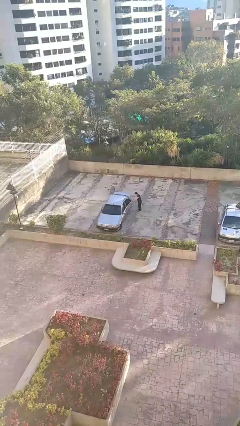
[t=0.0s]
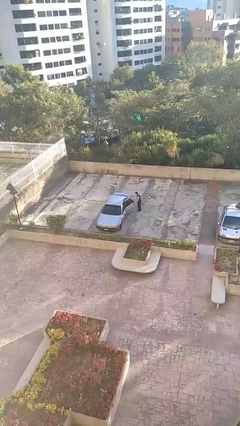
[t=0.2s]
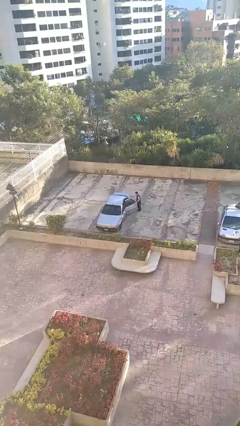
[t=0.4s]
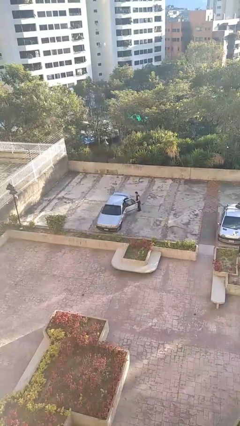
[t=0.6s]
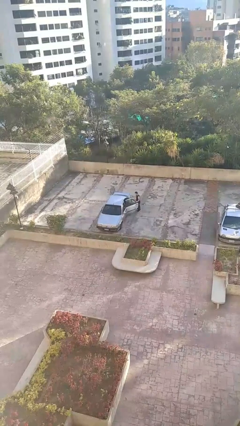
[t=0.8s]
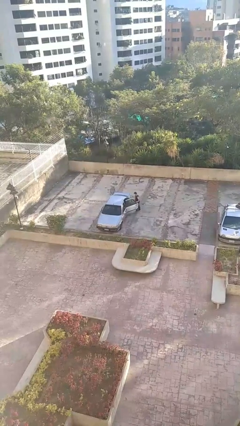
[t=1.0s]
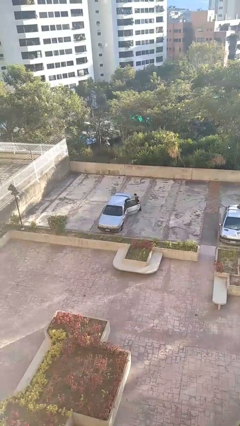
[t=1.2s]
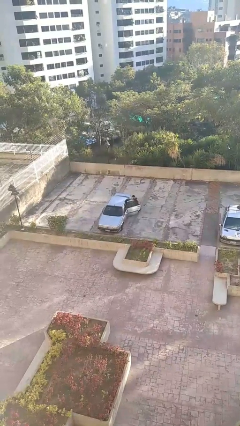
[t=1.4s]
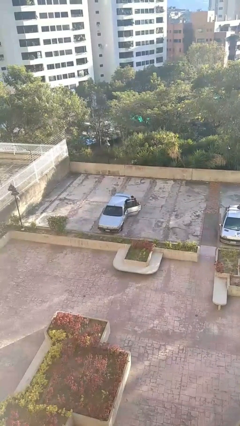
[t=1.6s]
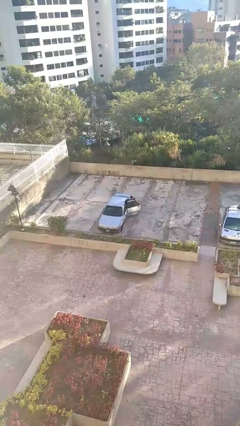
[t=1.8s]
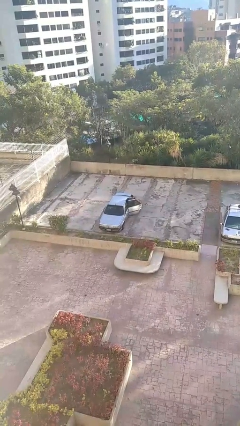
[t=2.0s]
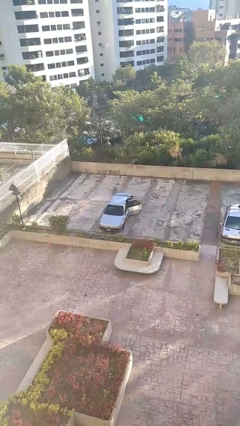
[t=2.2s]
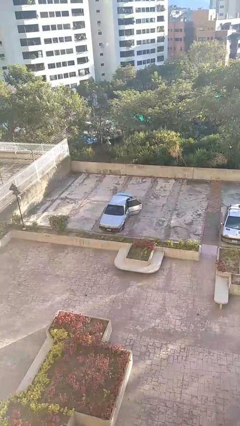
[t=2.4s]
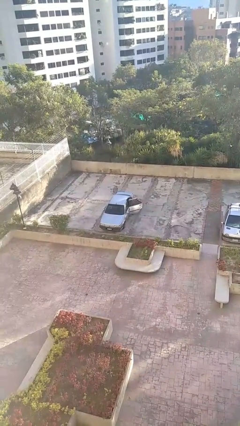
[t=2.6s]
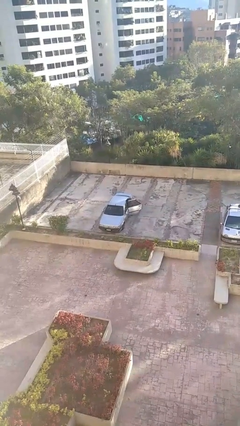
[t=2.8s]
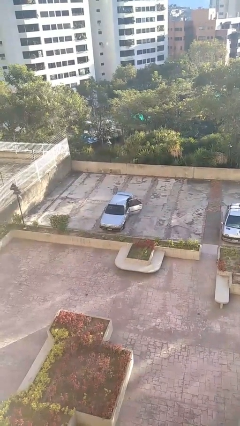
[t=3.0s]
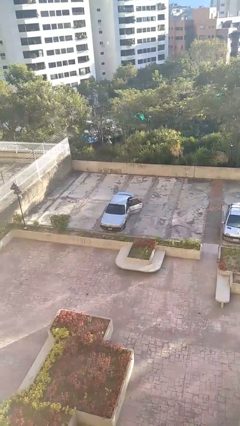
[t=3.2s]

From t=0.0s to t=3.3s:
car picks up person

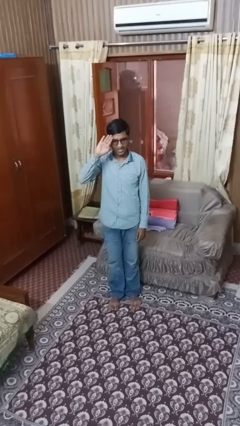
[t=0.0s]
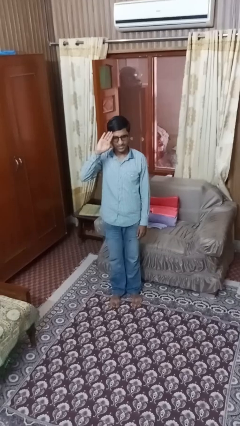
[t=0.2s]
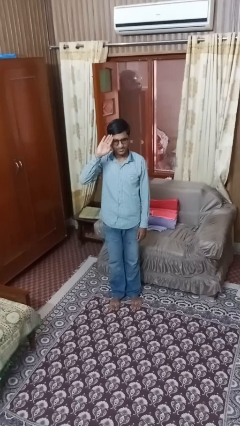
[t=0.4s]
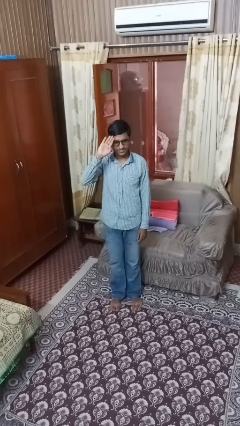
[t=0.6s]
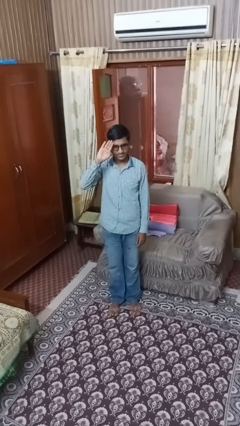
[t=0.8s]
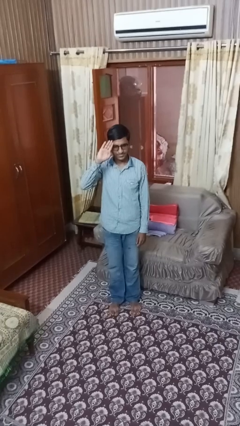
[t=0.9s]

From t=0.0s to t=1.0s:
person salutes

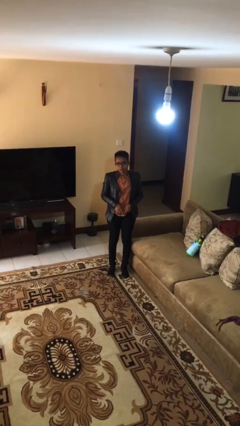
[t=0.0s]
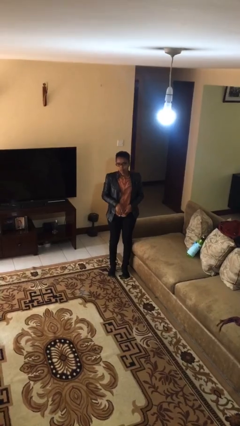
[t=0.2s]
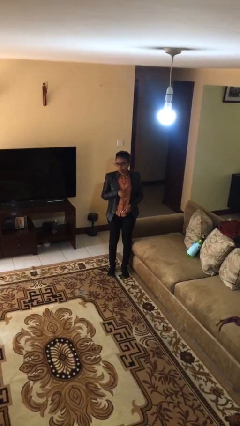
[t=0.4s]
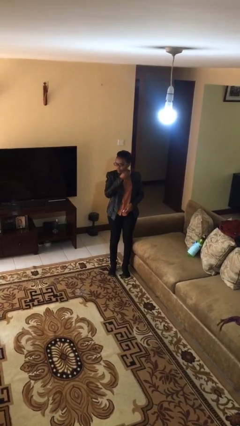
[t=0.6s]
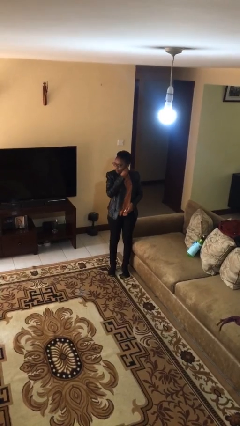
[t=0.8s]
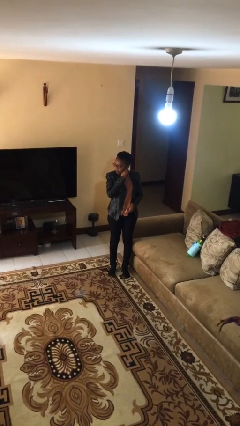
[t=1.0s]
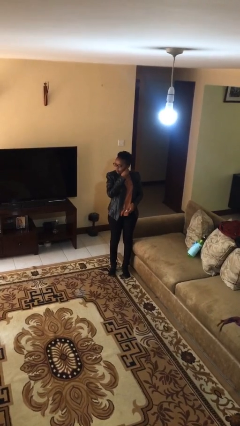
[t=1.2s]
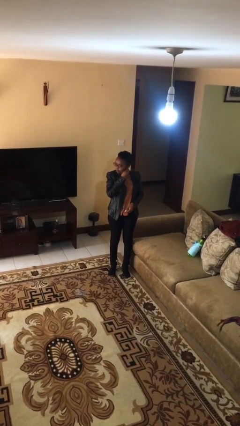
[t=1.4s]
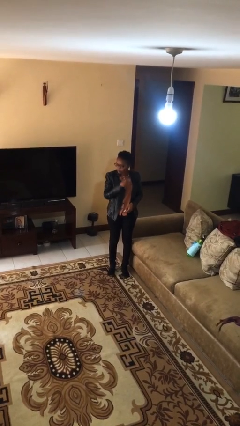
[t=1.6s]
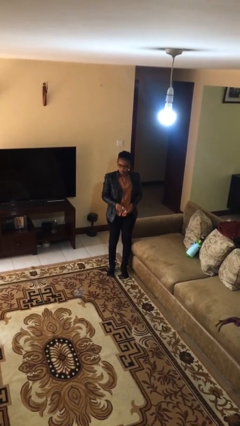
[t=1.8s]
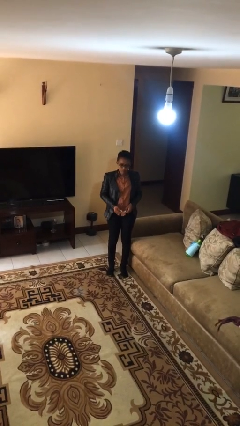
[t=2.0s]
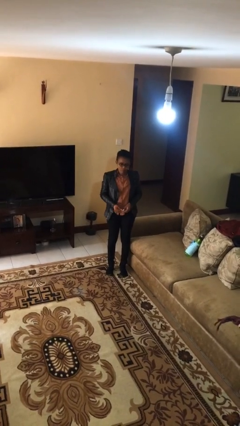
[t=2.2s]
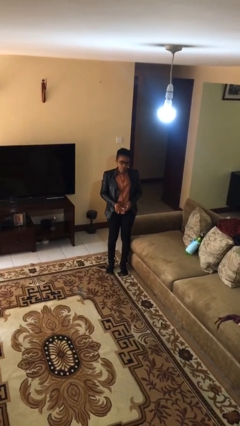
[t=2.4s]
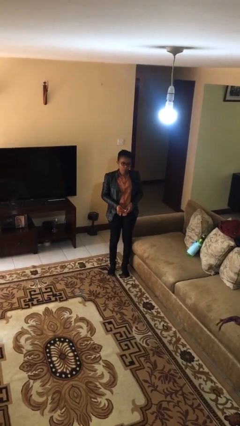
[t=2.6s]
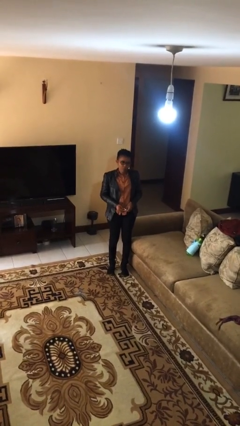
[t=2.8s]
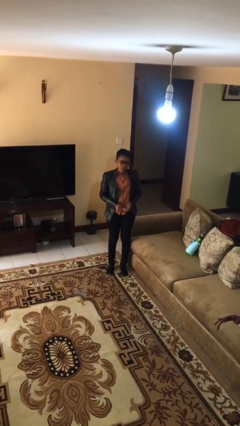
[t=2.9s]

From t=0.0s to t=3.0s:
person takes off earrings

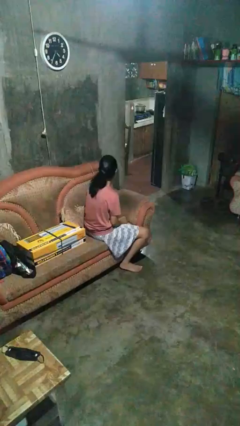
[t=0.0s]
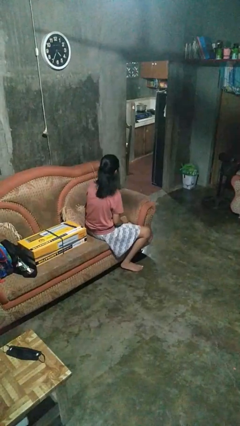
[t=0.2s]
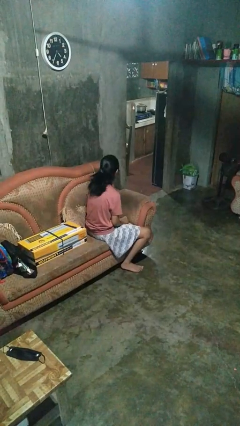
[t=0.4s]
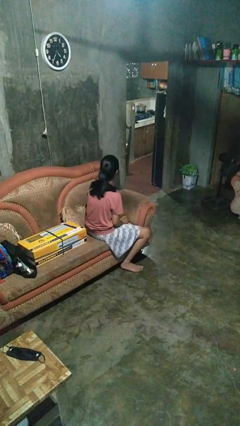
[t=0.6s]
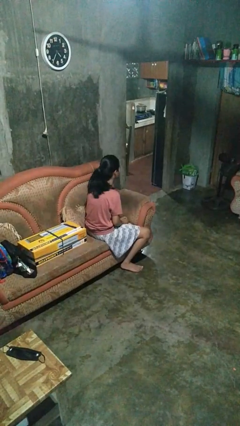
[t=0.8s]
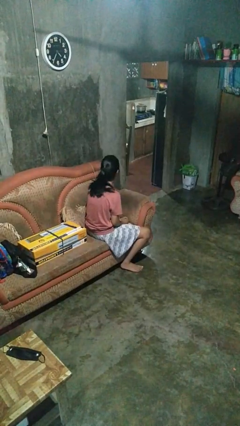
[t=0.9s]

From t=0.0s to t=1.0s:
person shakes head

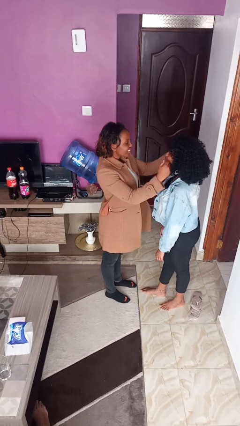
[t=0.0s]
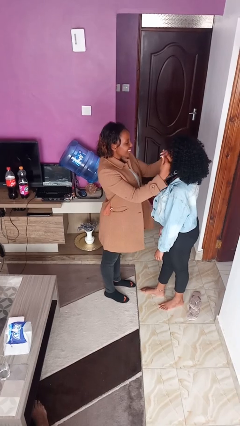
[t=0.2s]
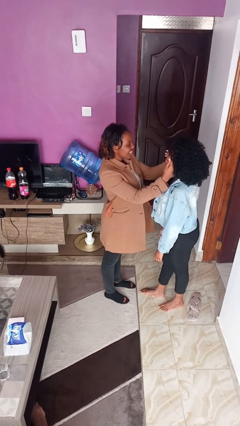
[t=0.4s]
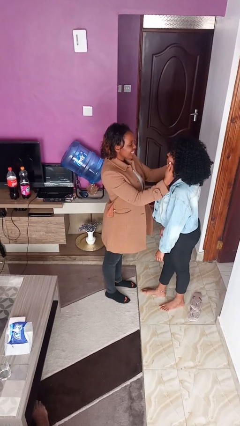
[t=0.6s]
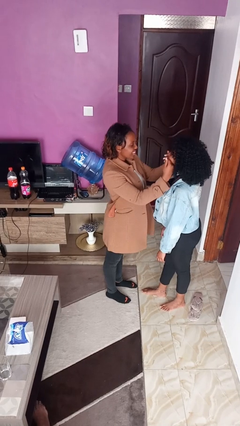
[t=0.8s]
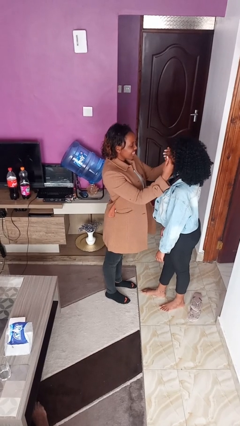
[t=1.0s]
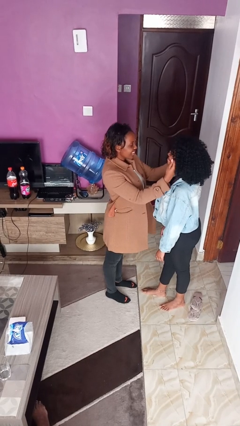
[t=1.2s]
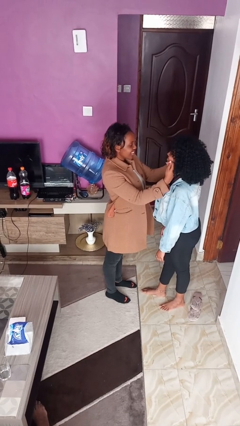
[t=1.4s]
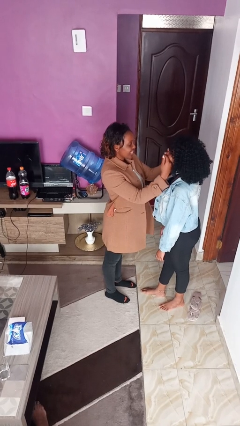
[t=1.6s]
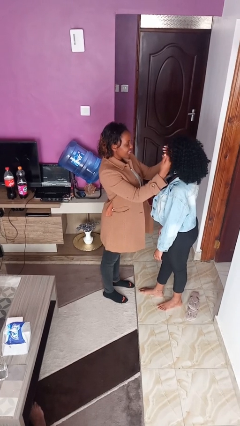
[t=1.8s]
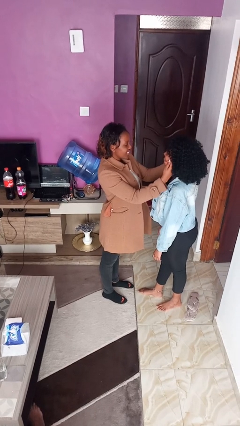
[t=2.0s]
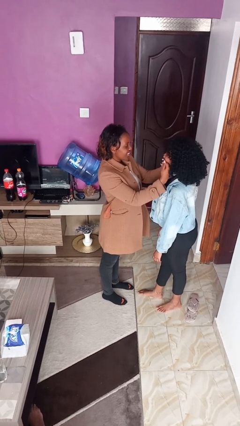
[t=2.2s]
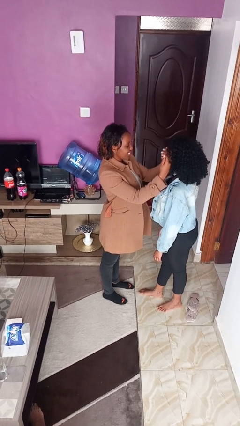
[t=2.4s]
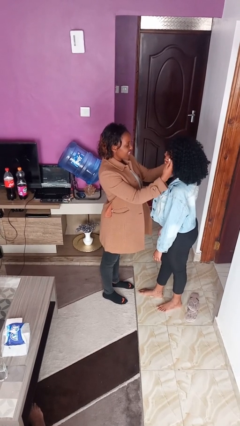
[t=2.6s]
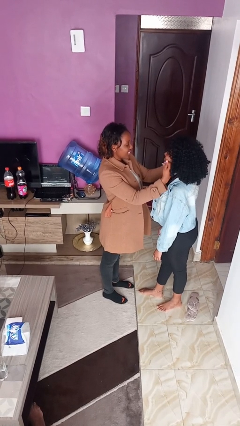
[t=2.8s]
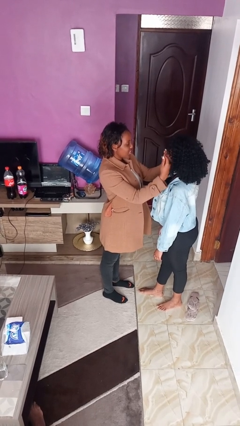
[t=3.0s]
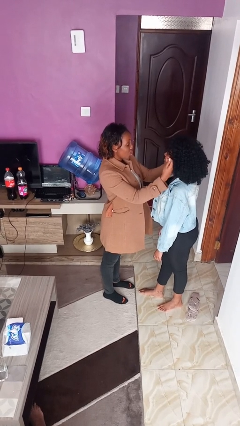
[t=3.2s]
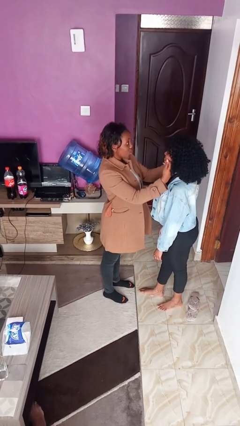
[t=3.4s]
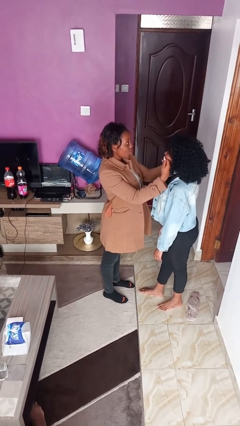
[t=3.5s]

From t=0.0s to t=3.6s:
person touches face of person

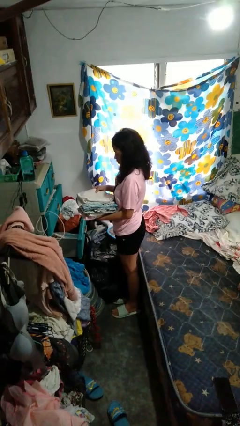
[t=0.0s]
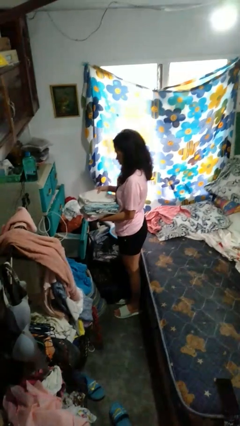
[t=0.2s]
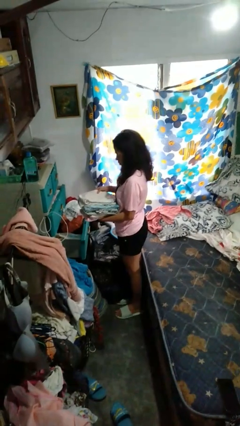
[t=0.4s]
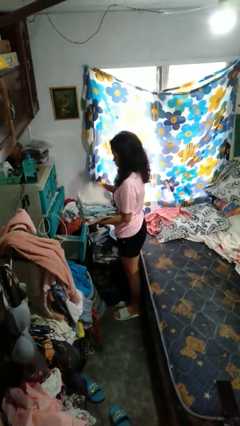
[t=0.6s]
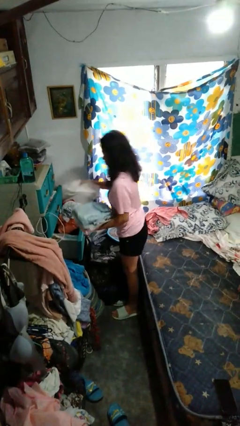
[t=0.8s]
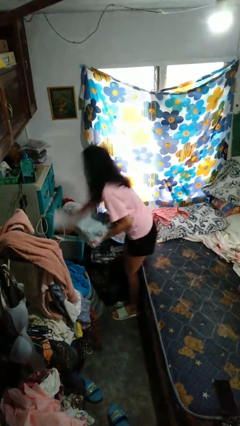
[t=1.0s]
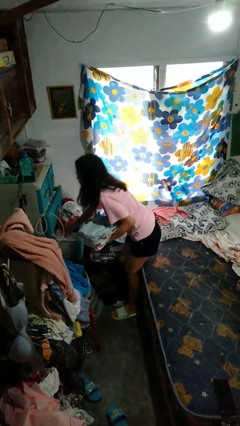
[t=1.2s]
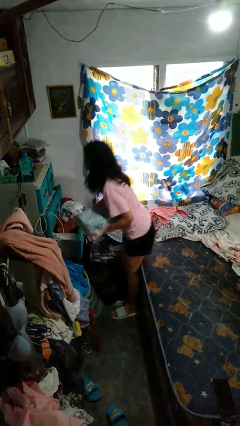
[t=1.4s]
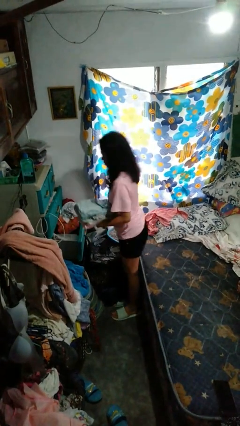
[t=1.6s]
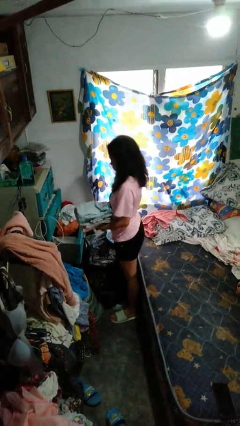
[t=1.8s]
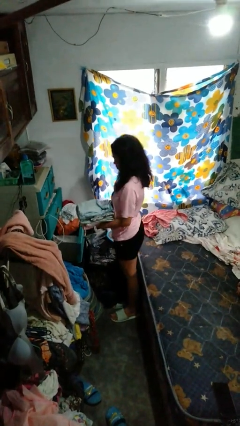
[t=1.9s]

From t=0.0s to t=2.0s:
person puts clothes into dresser

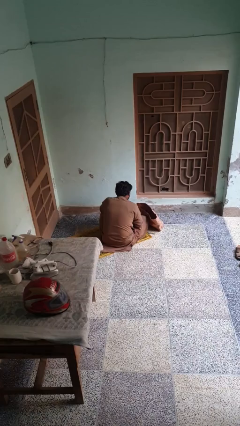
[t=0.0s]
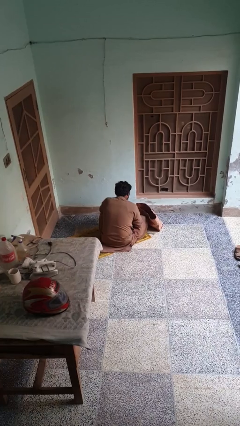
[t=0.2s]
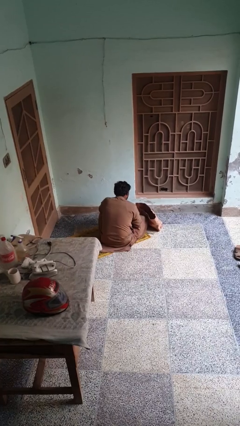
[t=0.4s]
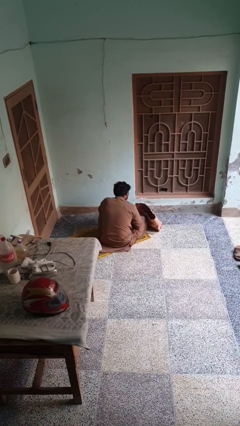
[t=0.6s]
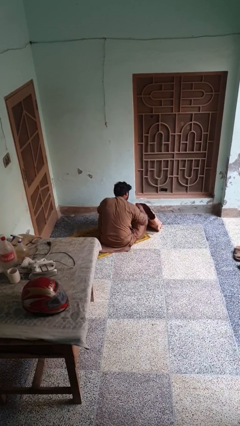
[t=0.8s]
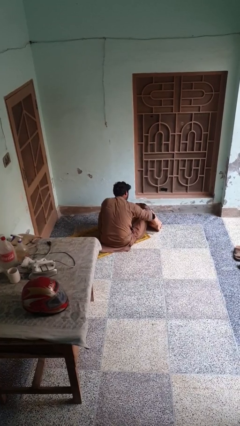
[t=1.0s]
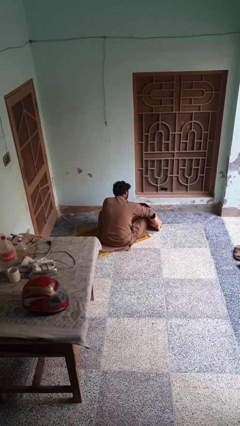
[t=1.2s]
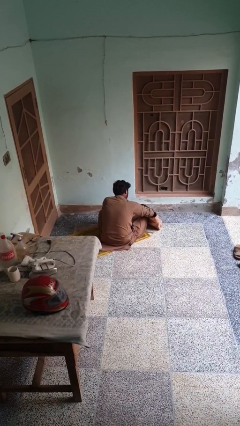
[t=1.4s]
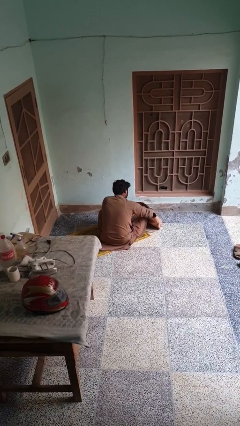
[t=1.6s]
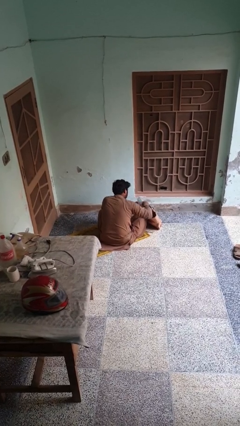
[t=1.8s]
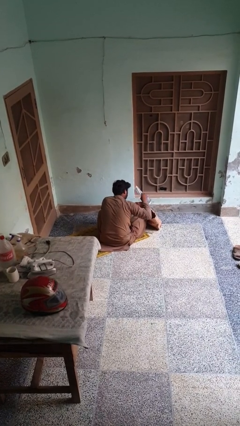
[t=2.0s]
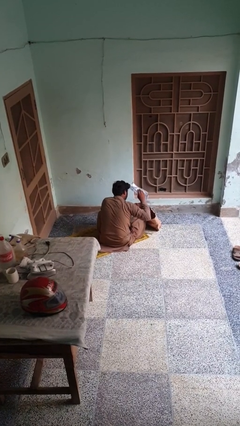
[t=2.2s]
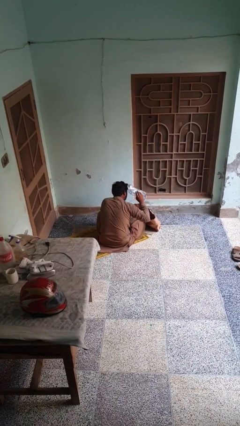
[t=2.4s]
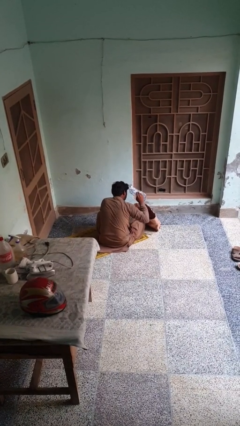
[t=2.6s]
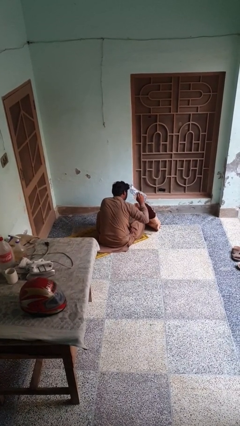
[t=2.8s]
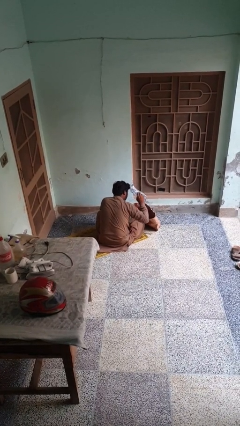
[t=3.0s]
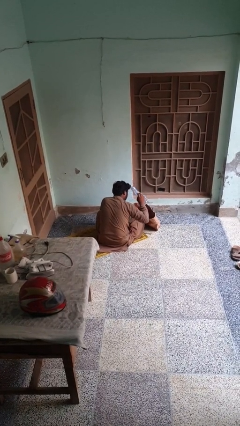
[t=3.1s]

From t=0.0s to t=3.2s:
person searches in bag

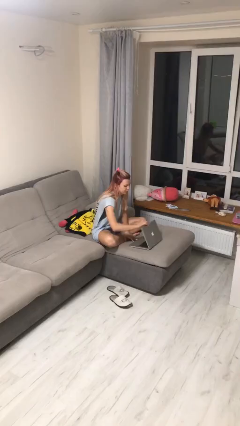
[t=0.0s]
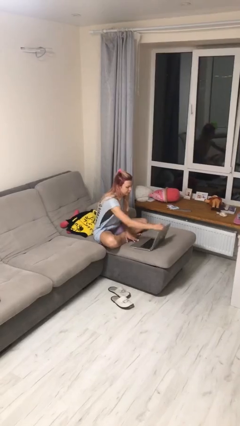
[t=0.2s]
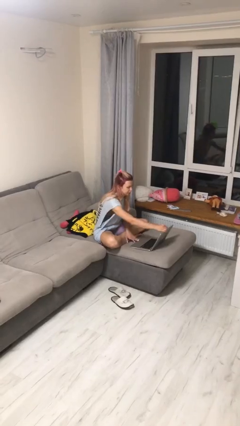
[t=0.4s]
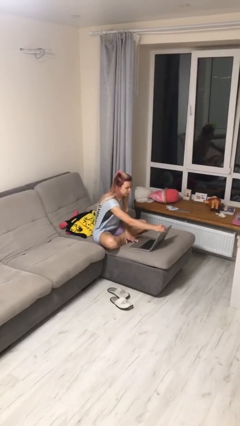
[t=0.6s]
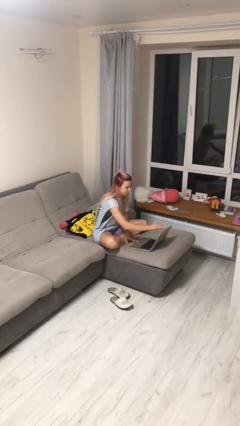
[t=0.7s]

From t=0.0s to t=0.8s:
person opens laptop
